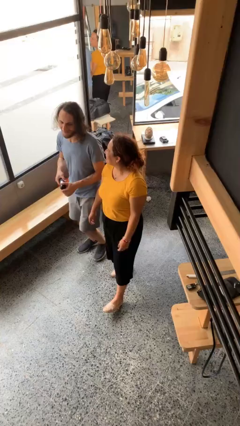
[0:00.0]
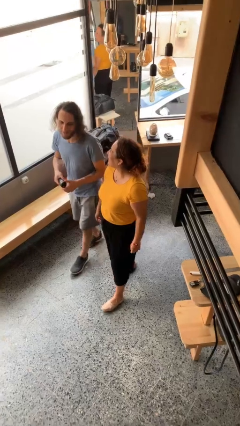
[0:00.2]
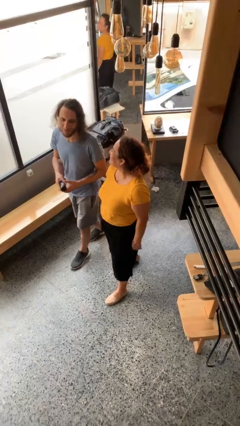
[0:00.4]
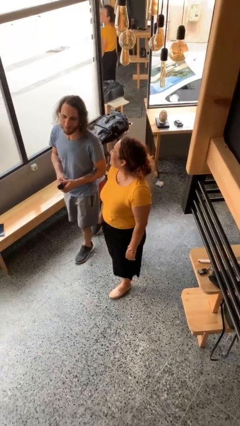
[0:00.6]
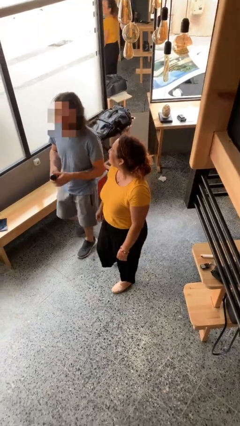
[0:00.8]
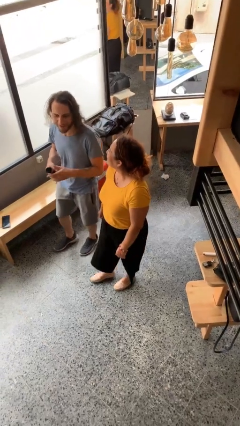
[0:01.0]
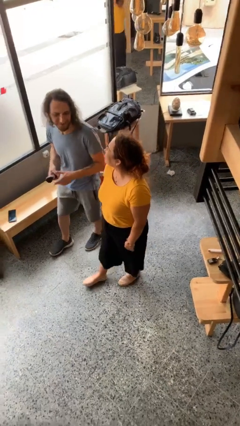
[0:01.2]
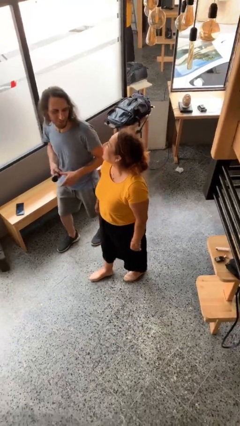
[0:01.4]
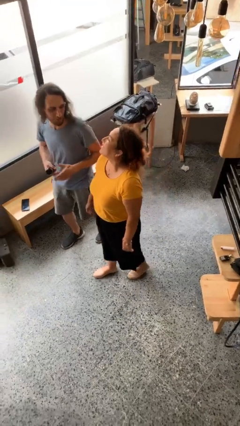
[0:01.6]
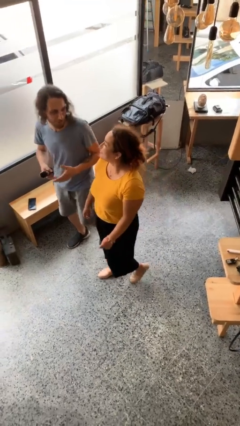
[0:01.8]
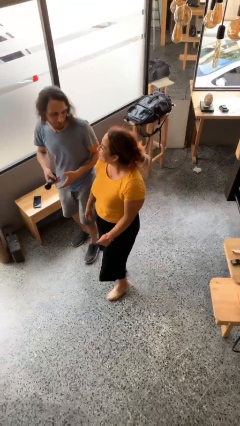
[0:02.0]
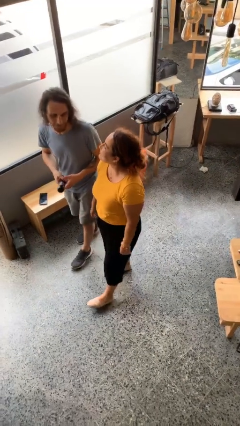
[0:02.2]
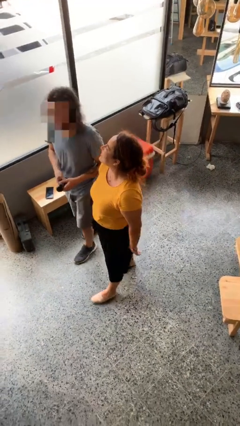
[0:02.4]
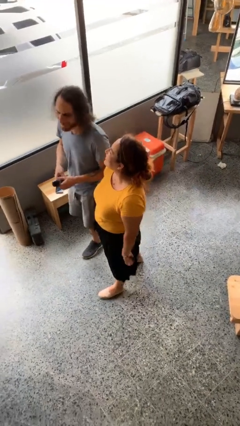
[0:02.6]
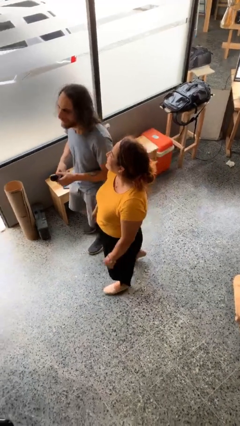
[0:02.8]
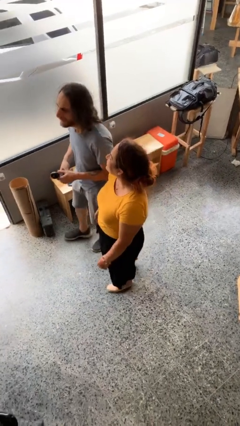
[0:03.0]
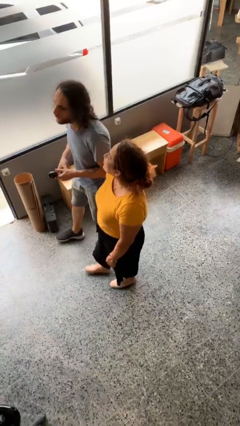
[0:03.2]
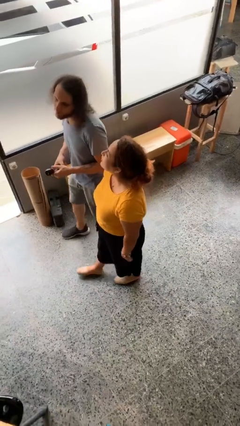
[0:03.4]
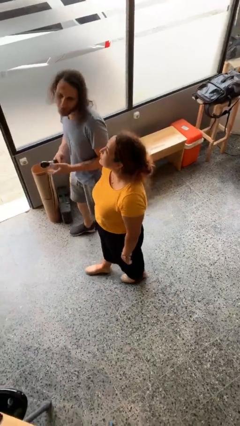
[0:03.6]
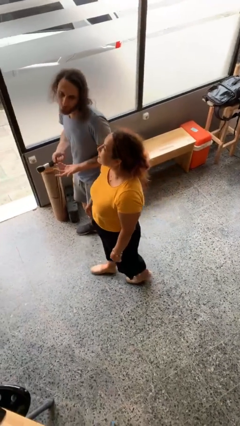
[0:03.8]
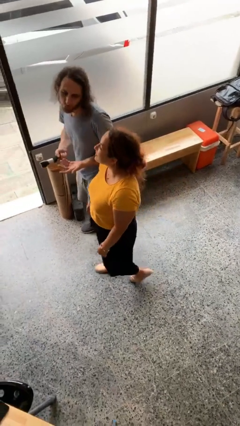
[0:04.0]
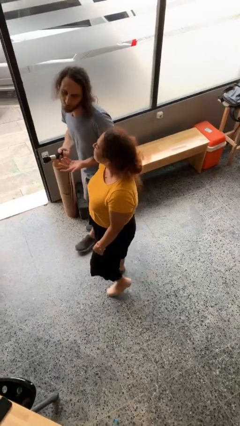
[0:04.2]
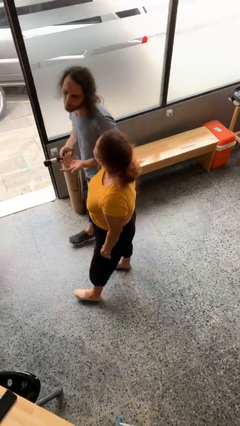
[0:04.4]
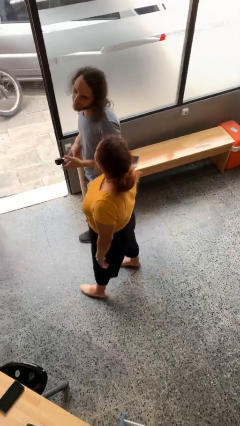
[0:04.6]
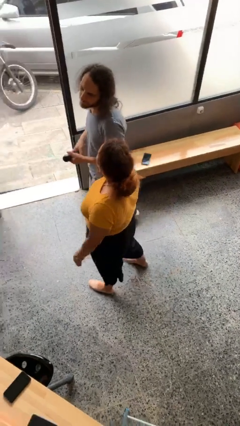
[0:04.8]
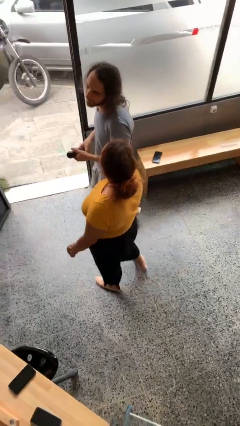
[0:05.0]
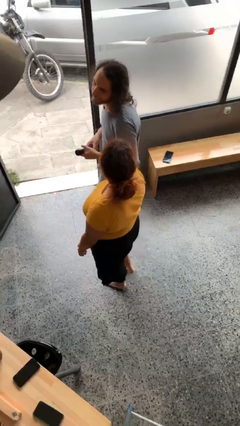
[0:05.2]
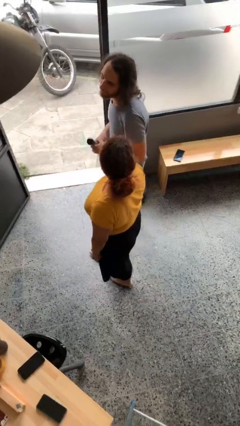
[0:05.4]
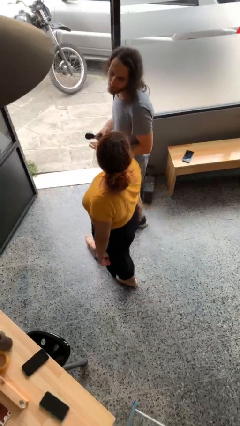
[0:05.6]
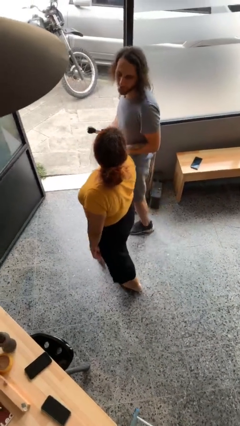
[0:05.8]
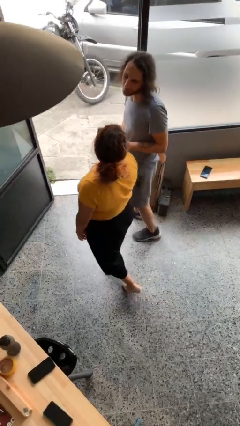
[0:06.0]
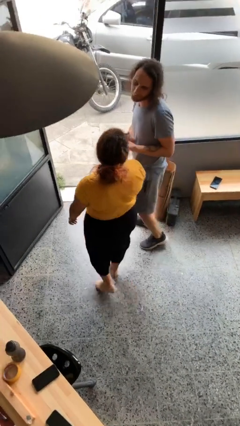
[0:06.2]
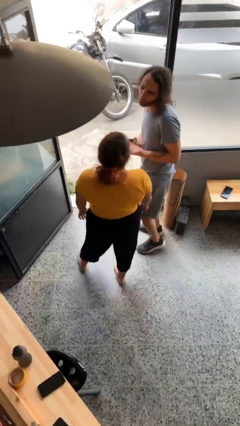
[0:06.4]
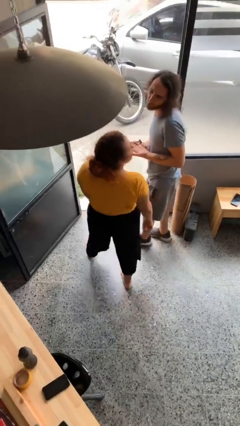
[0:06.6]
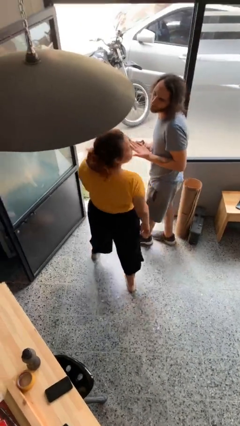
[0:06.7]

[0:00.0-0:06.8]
person talks to person

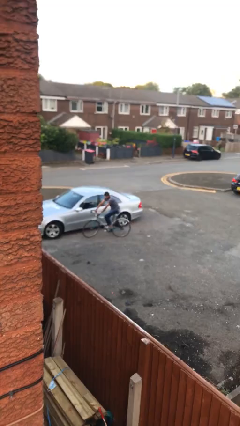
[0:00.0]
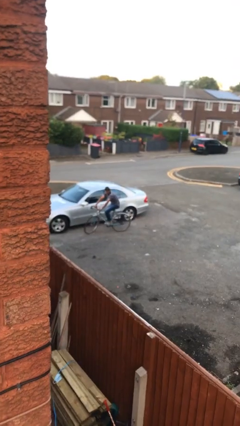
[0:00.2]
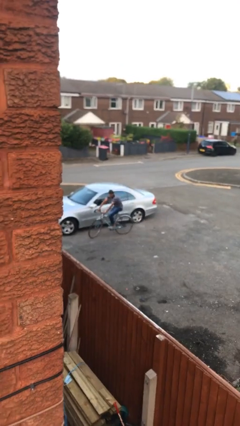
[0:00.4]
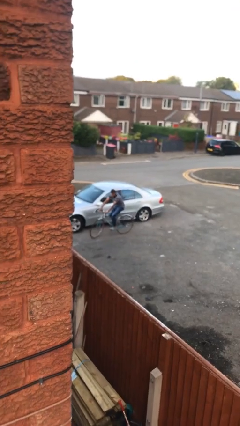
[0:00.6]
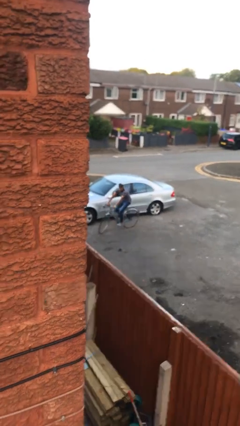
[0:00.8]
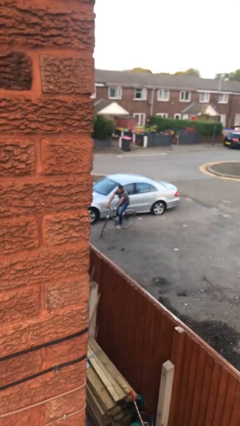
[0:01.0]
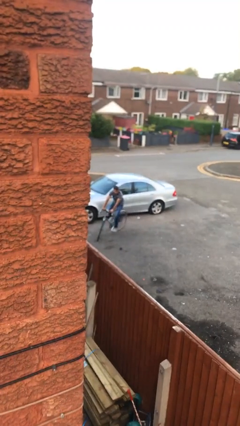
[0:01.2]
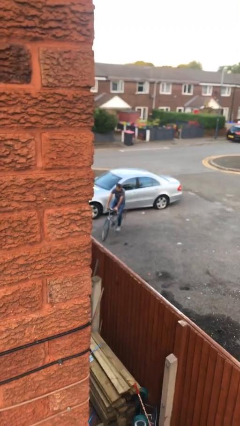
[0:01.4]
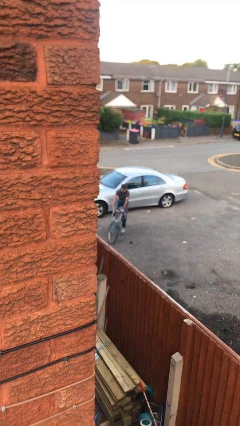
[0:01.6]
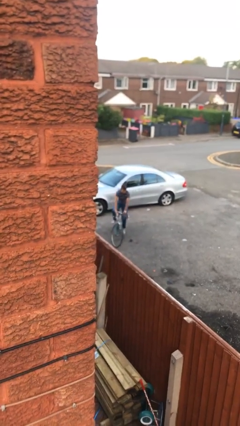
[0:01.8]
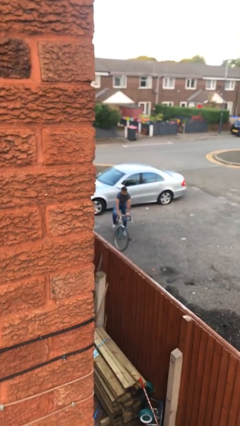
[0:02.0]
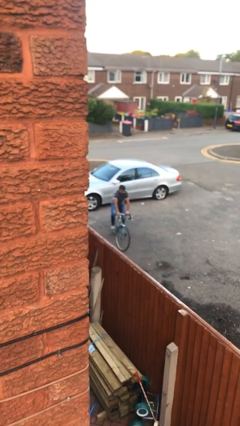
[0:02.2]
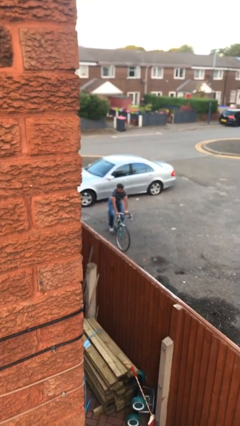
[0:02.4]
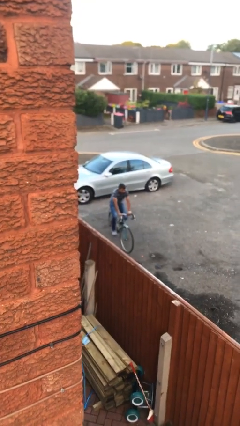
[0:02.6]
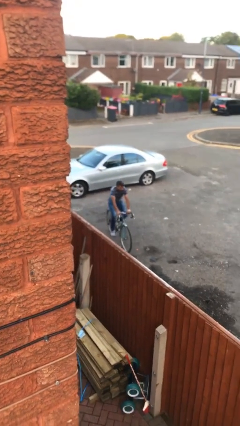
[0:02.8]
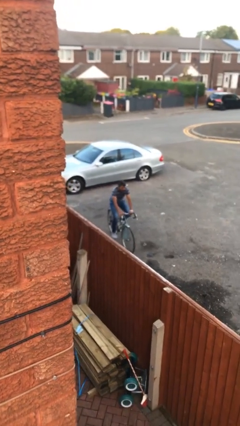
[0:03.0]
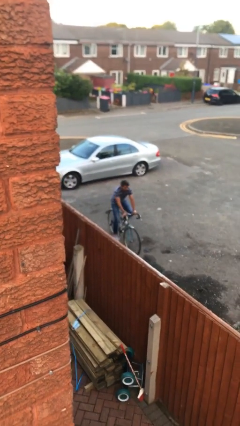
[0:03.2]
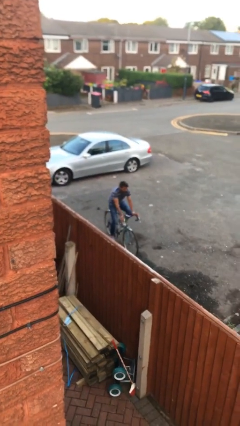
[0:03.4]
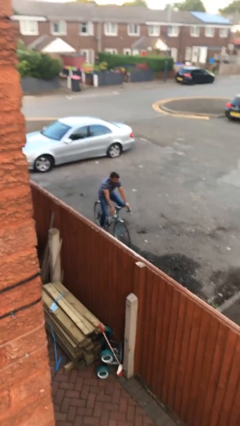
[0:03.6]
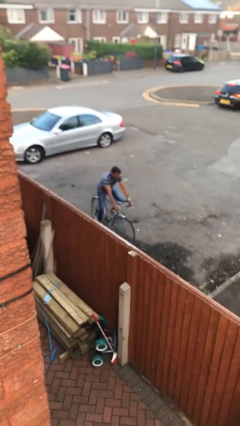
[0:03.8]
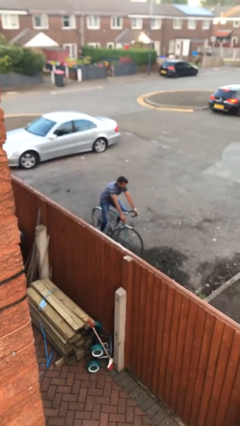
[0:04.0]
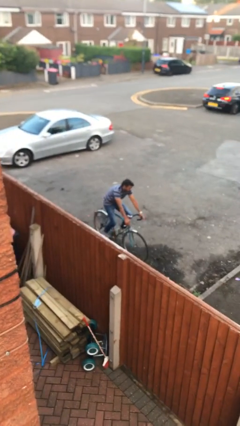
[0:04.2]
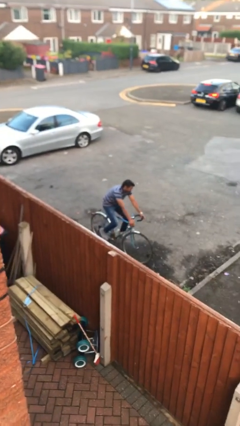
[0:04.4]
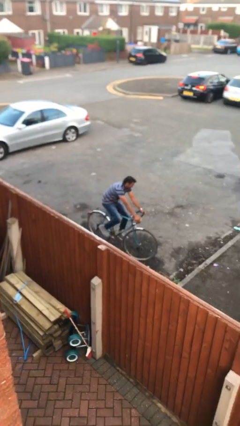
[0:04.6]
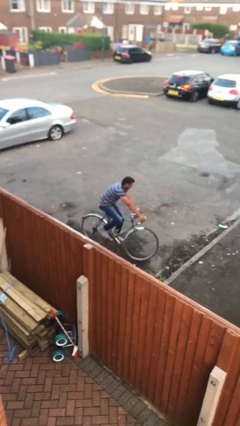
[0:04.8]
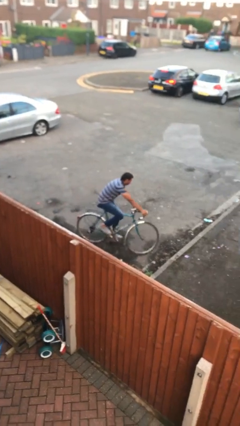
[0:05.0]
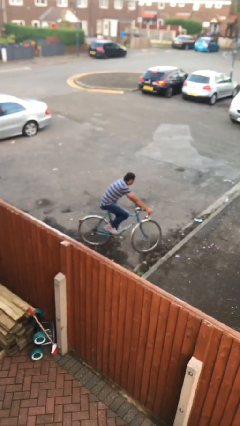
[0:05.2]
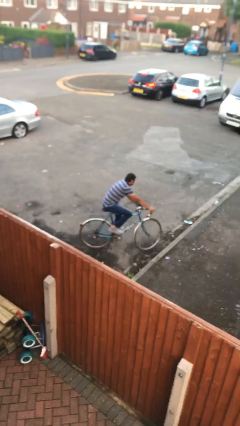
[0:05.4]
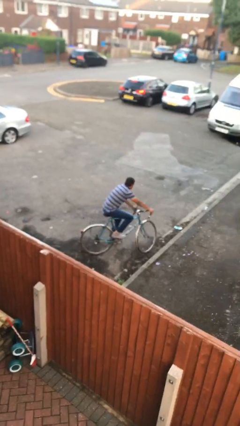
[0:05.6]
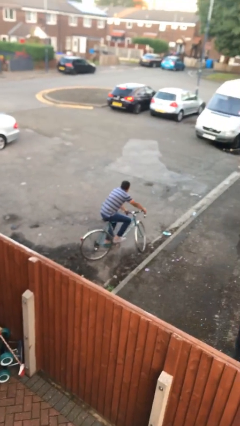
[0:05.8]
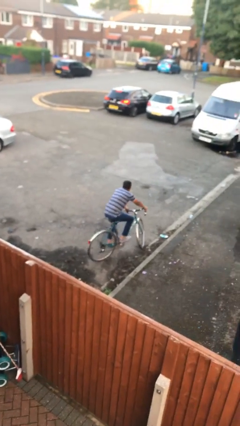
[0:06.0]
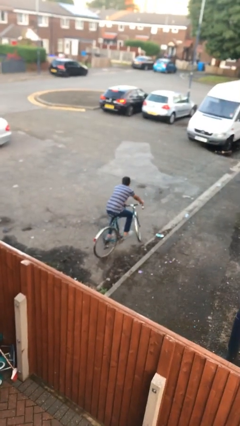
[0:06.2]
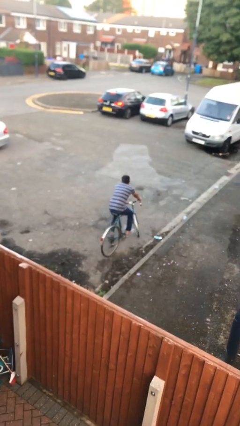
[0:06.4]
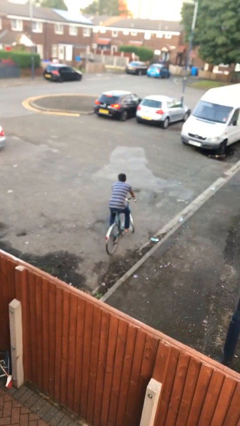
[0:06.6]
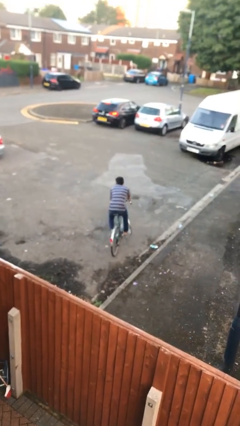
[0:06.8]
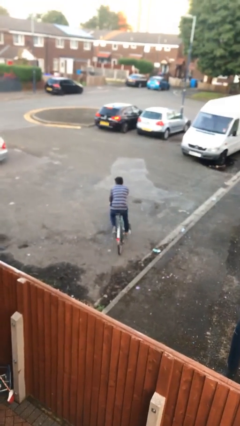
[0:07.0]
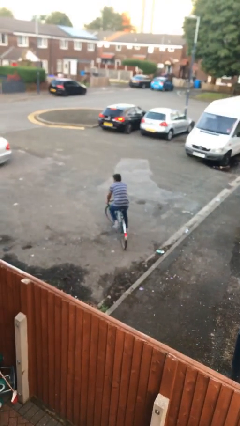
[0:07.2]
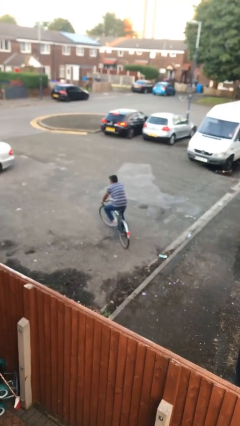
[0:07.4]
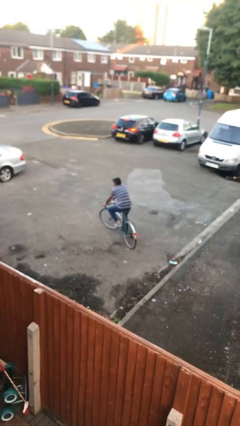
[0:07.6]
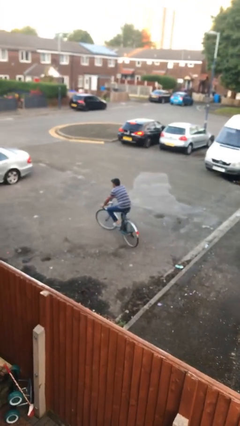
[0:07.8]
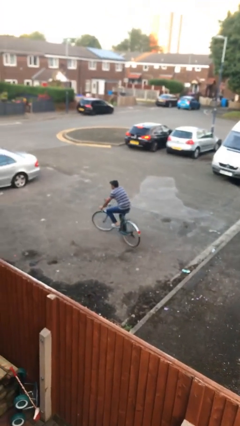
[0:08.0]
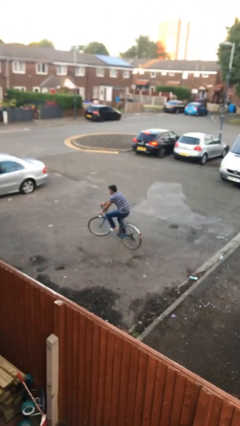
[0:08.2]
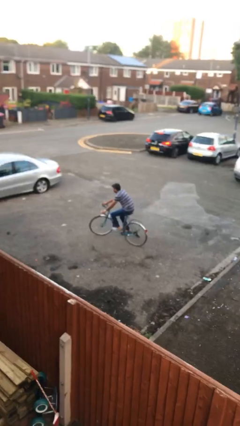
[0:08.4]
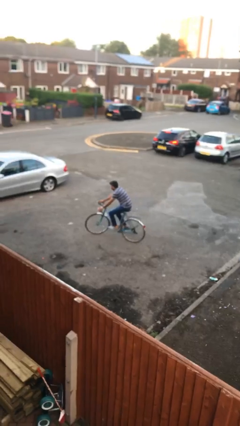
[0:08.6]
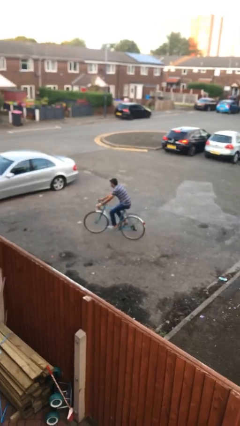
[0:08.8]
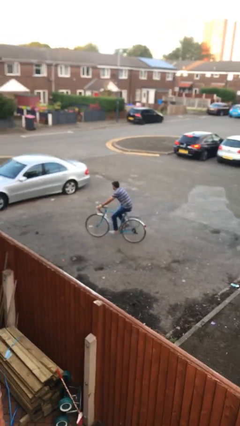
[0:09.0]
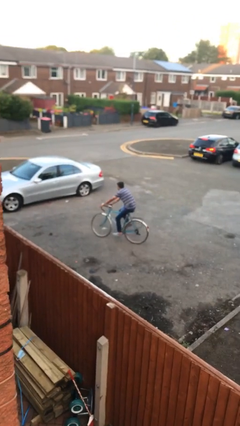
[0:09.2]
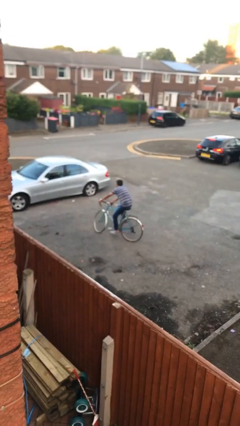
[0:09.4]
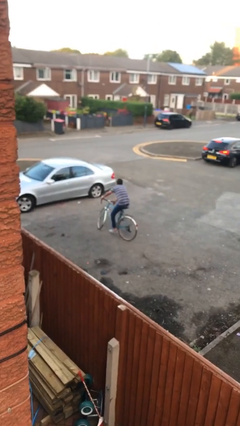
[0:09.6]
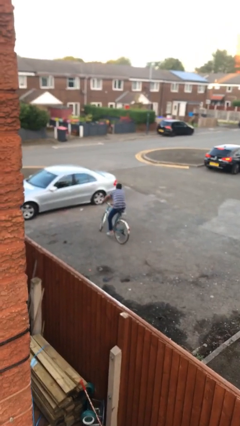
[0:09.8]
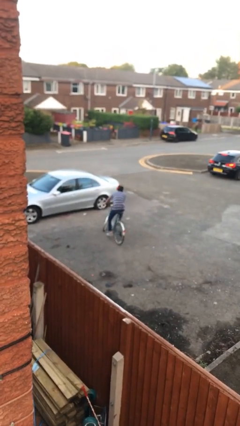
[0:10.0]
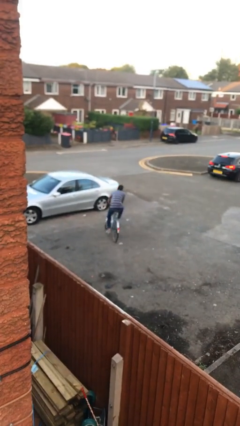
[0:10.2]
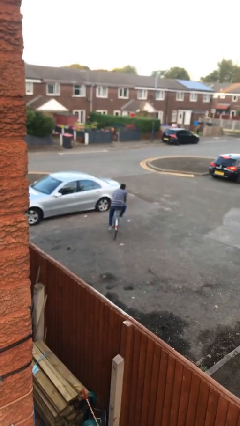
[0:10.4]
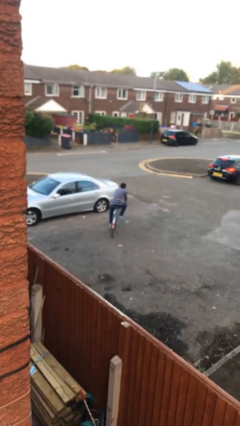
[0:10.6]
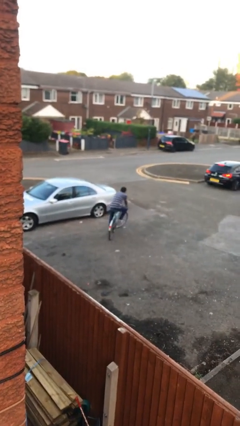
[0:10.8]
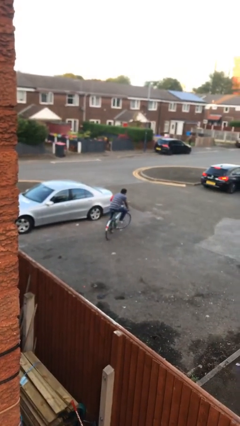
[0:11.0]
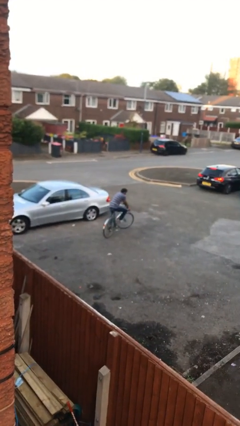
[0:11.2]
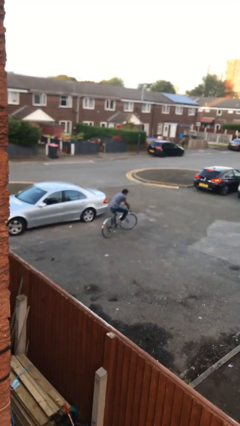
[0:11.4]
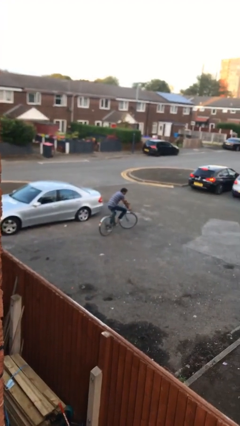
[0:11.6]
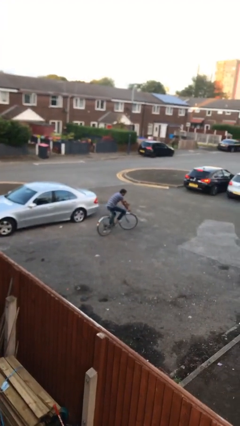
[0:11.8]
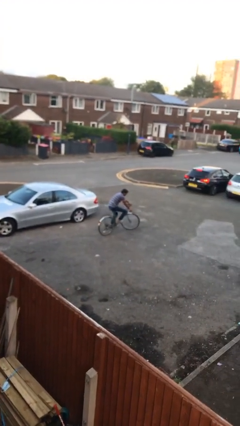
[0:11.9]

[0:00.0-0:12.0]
person rides bicycle
